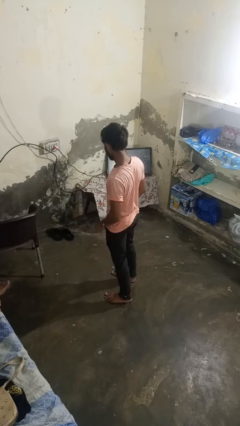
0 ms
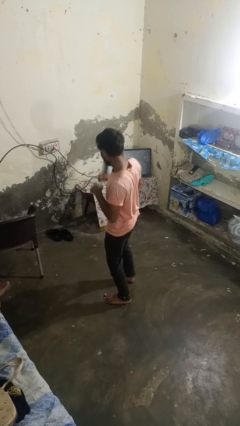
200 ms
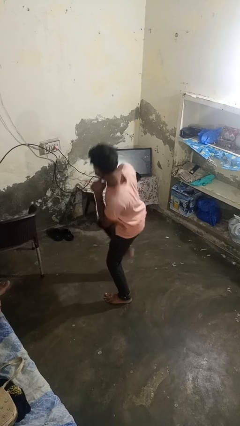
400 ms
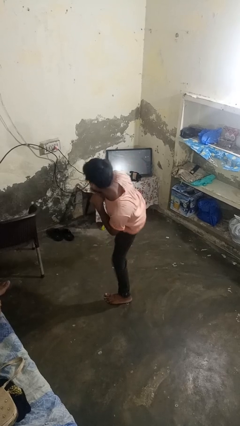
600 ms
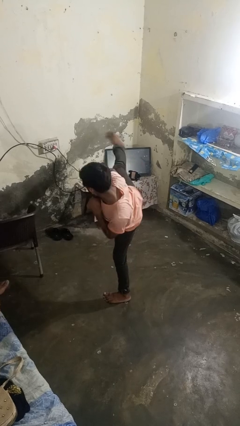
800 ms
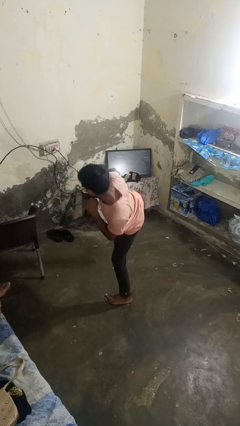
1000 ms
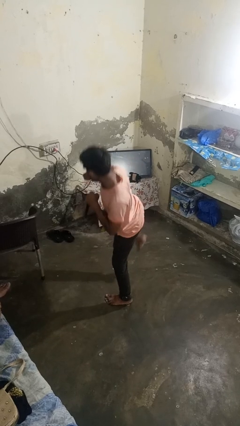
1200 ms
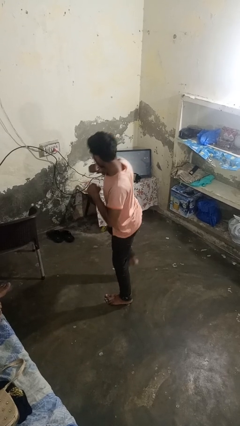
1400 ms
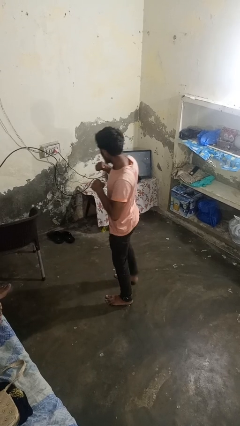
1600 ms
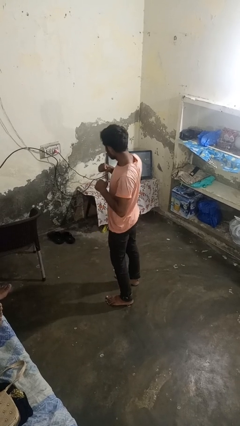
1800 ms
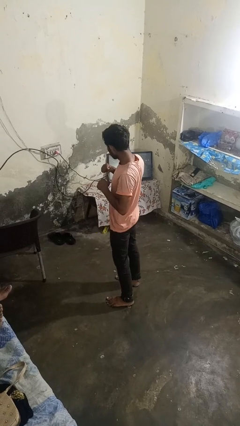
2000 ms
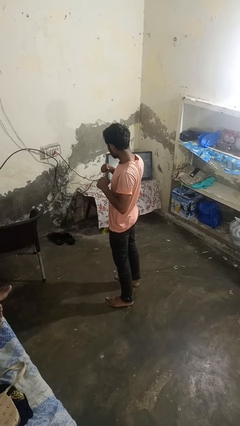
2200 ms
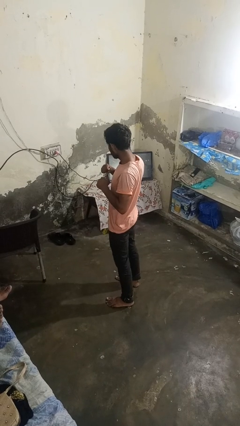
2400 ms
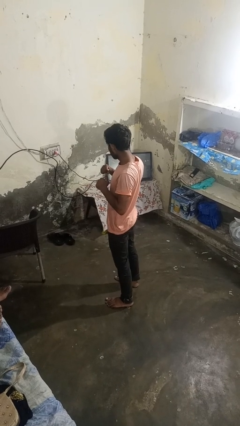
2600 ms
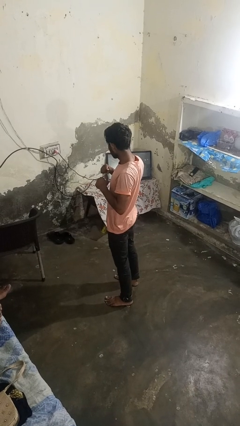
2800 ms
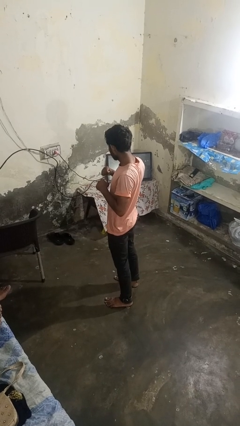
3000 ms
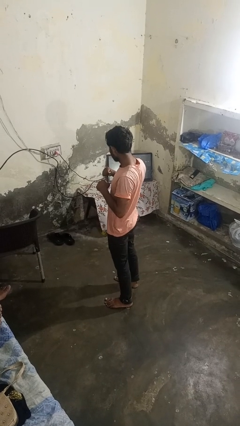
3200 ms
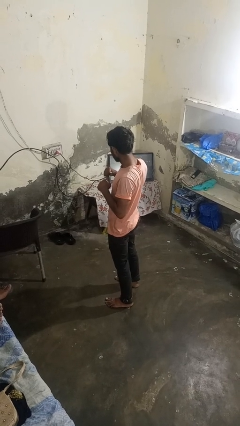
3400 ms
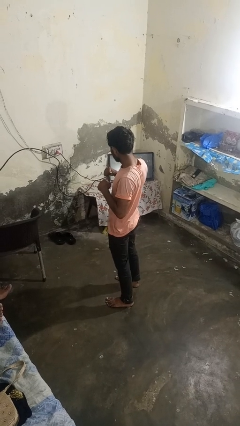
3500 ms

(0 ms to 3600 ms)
person karate kicks

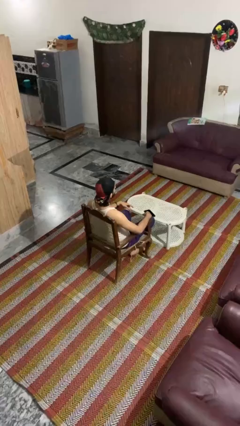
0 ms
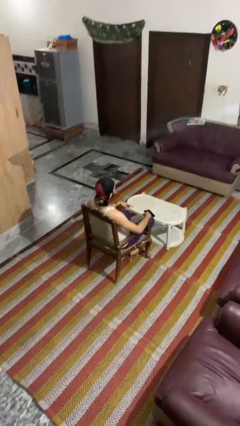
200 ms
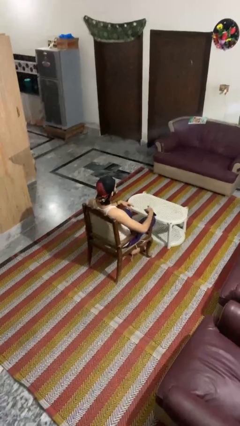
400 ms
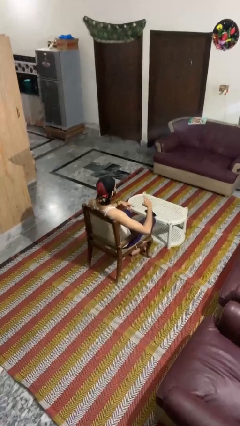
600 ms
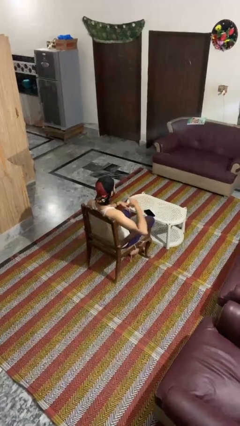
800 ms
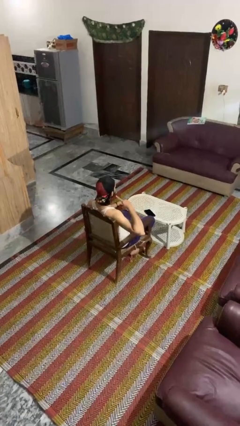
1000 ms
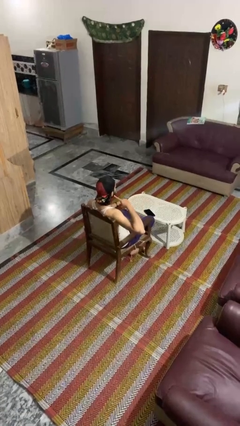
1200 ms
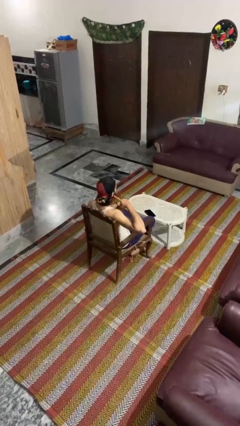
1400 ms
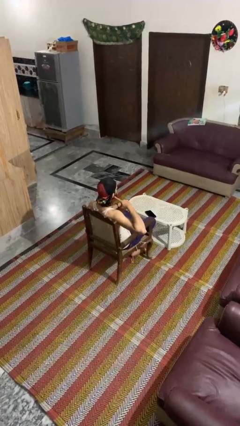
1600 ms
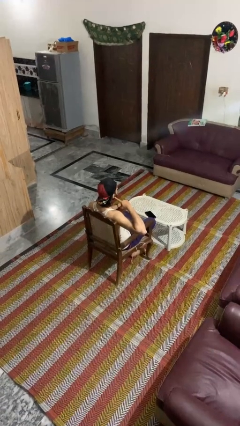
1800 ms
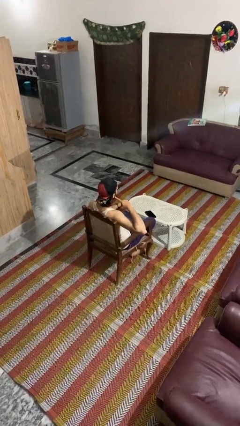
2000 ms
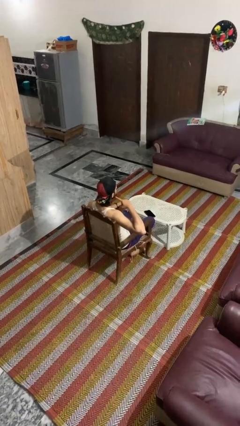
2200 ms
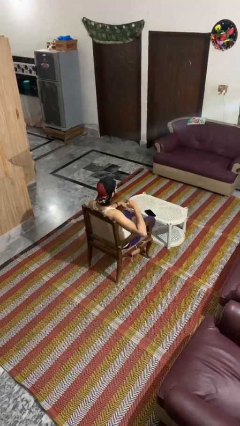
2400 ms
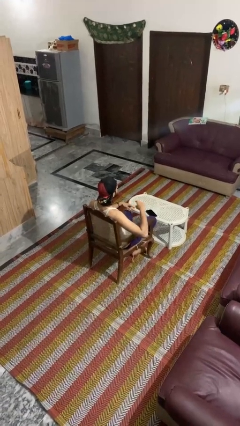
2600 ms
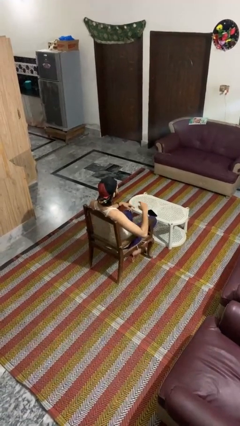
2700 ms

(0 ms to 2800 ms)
person gestures listen closely

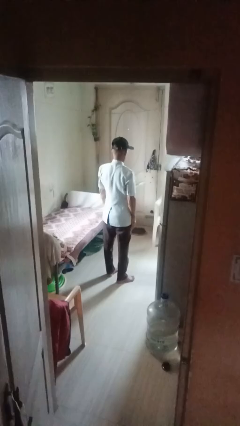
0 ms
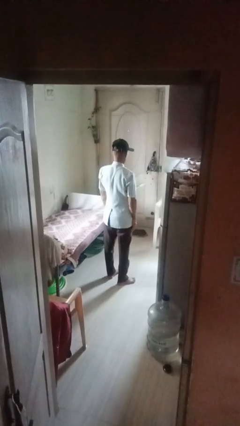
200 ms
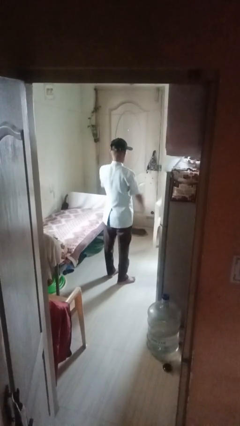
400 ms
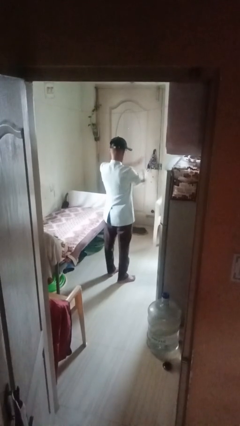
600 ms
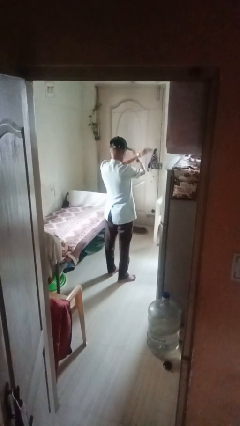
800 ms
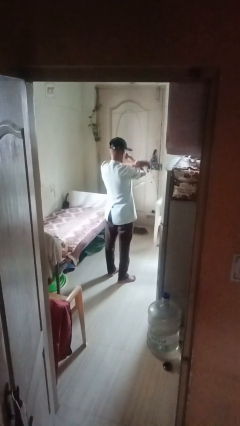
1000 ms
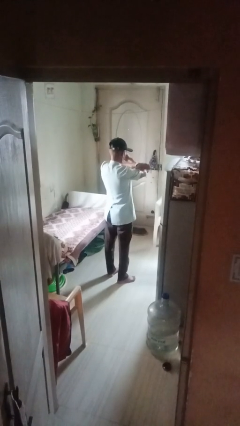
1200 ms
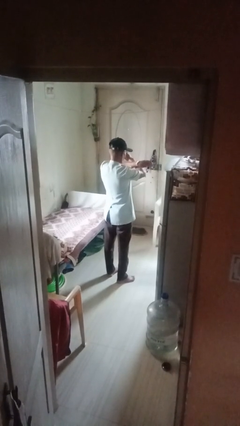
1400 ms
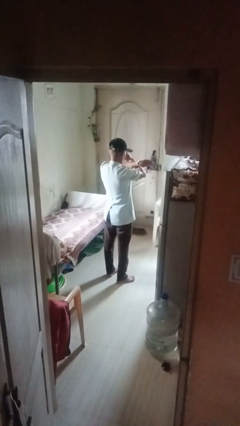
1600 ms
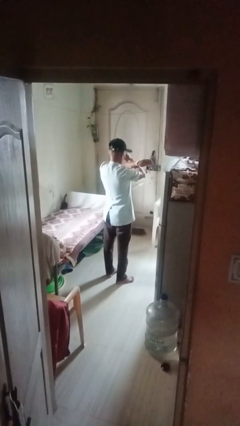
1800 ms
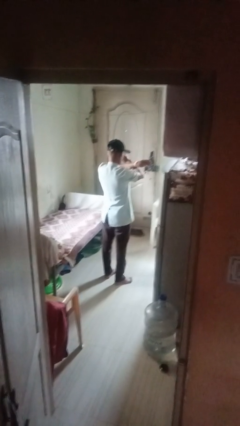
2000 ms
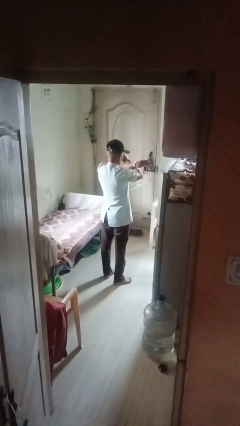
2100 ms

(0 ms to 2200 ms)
person gestures arms x

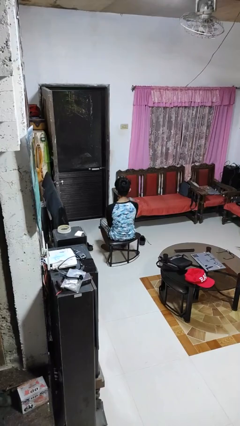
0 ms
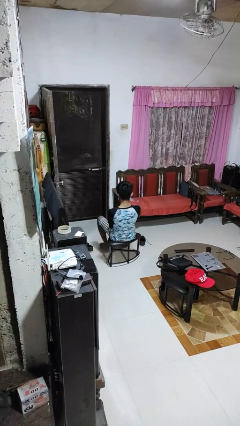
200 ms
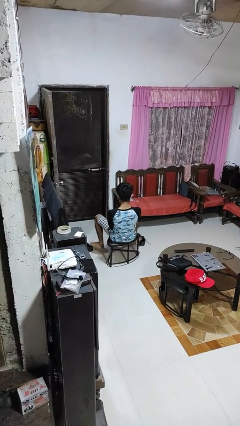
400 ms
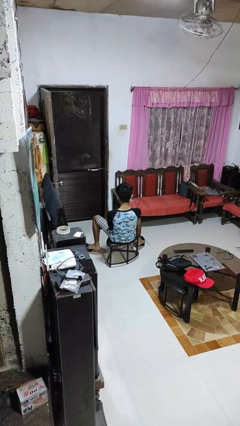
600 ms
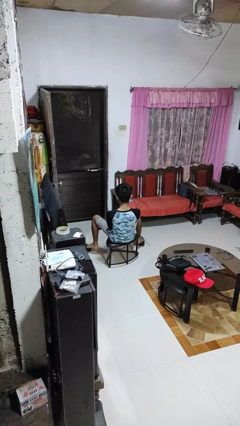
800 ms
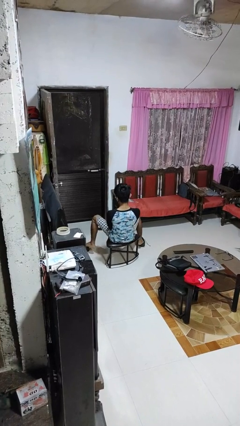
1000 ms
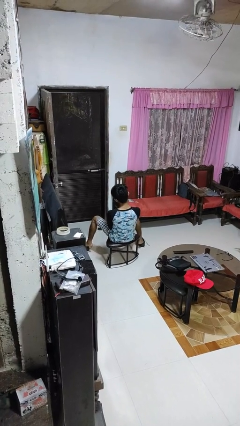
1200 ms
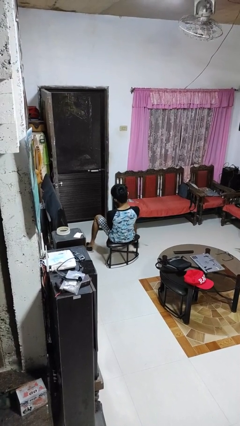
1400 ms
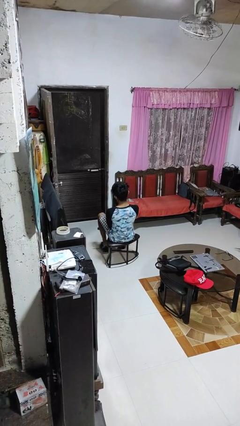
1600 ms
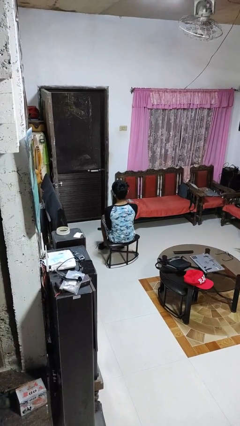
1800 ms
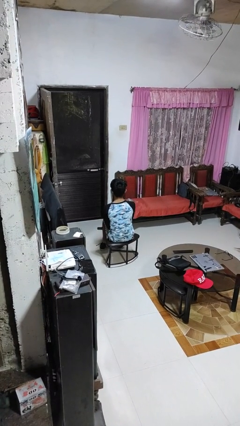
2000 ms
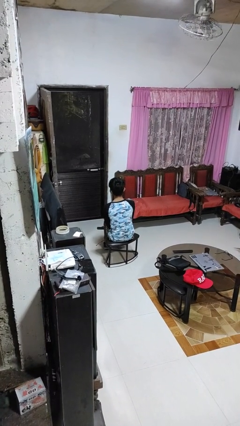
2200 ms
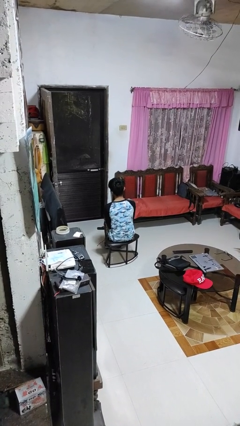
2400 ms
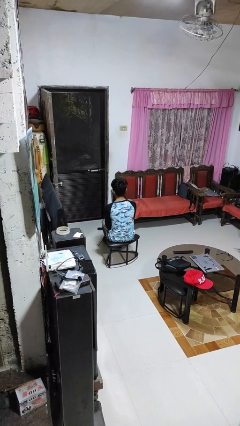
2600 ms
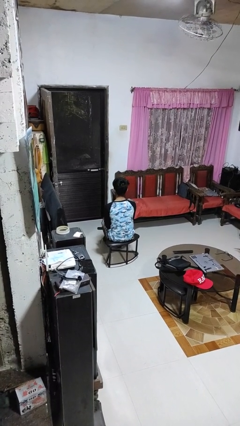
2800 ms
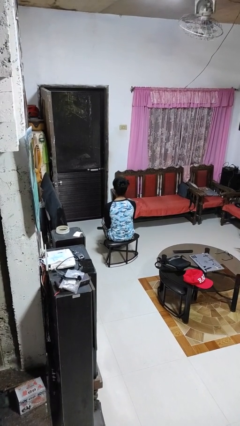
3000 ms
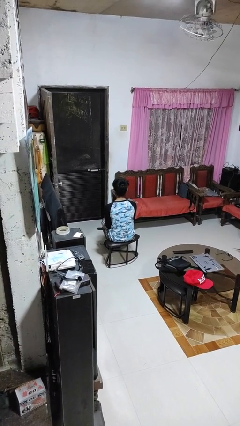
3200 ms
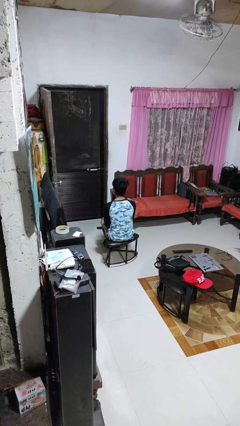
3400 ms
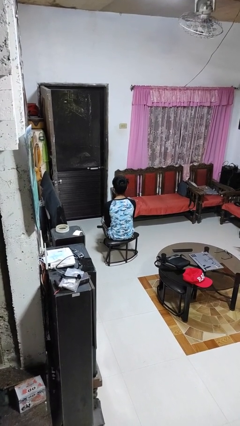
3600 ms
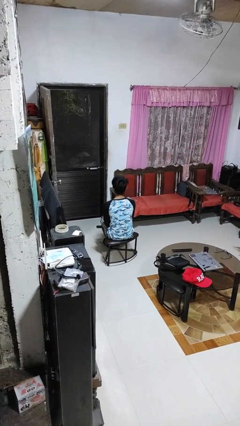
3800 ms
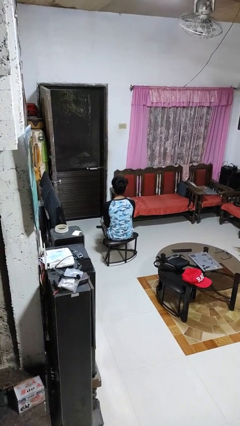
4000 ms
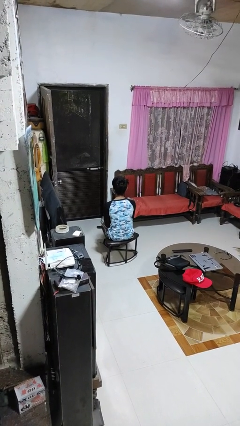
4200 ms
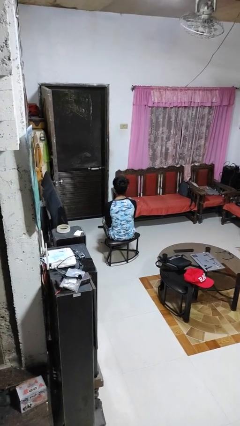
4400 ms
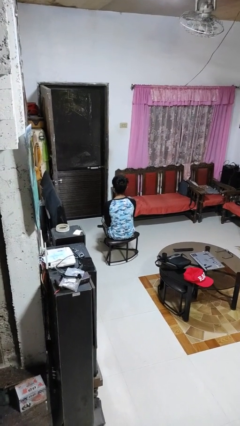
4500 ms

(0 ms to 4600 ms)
person puts on shoes

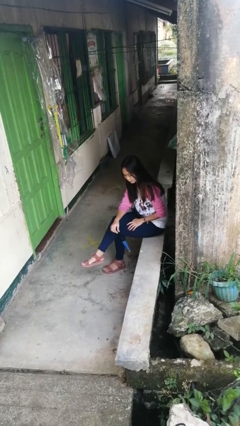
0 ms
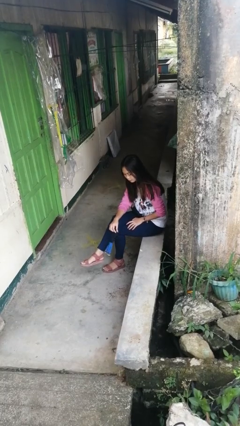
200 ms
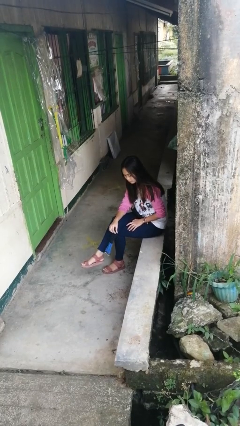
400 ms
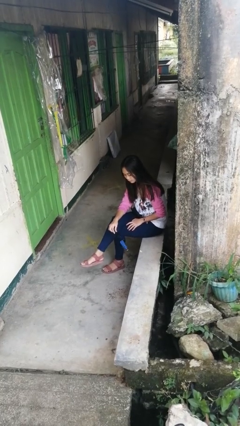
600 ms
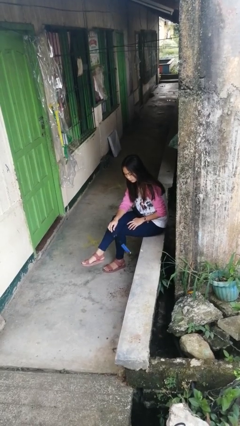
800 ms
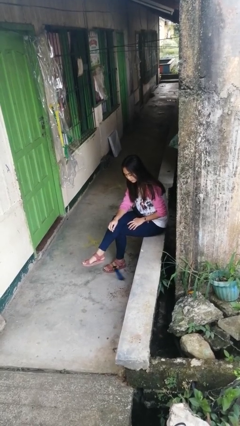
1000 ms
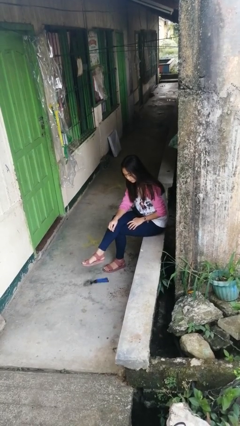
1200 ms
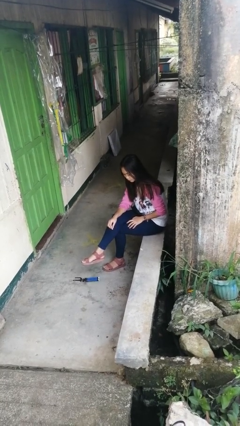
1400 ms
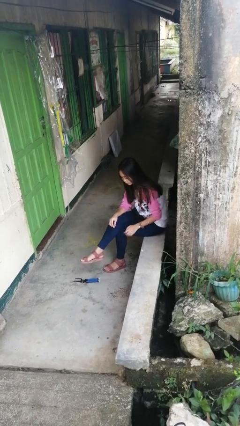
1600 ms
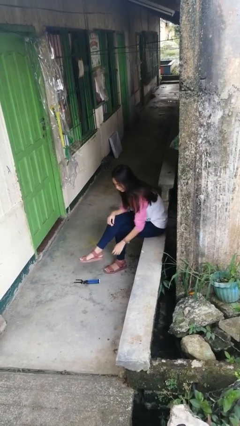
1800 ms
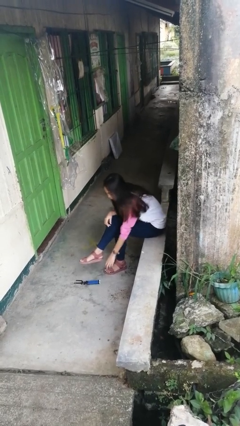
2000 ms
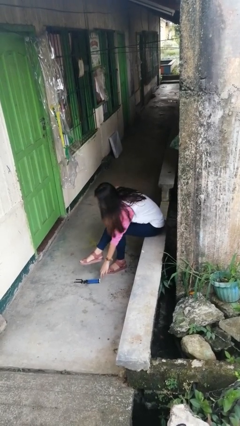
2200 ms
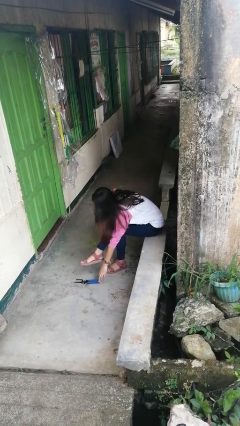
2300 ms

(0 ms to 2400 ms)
person drops object

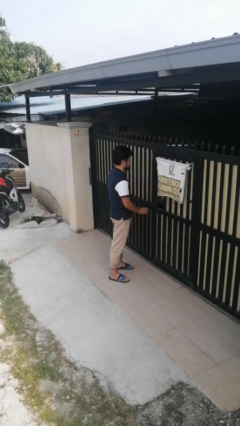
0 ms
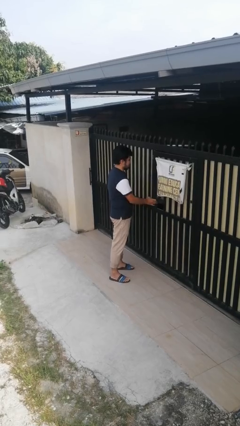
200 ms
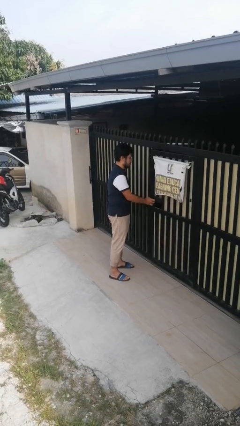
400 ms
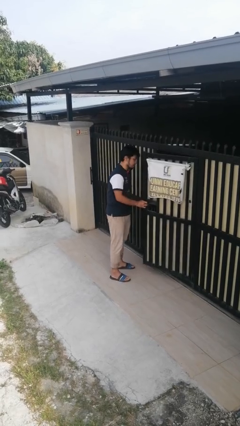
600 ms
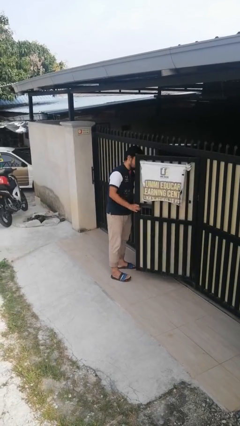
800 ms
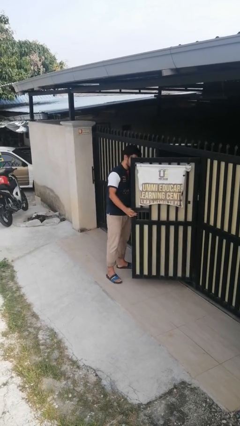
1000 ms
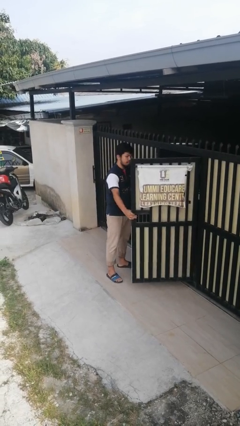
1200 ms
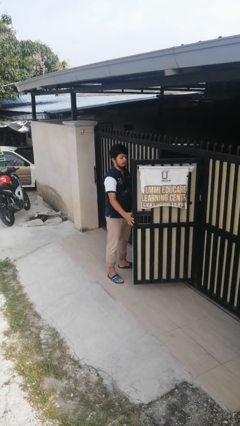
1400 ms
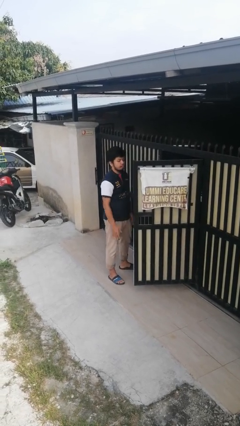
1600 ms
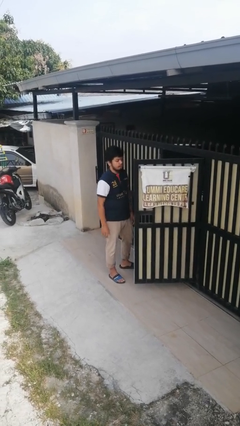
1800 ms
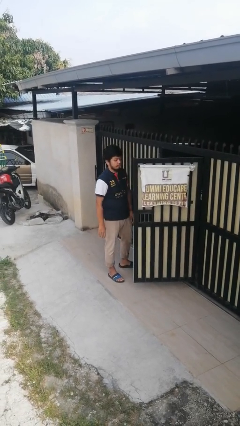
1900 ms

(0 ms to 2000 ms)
person opens gate
